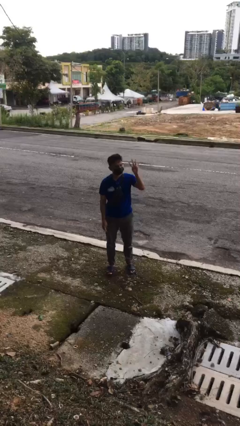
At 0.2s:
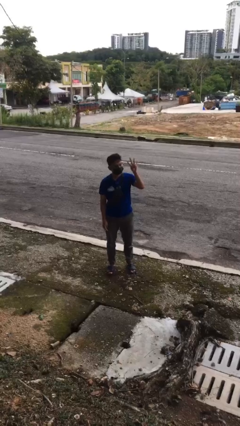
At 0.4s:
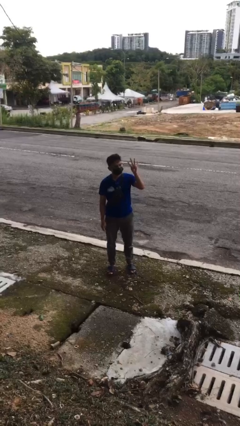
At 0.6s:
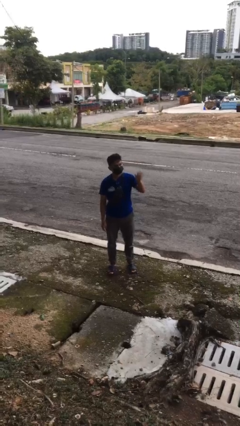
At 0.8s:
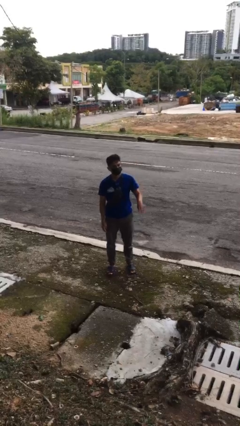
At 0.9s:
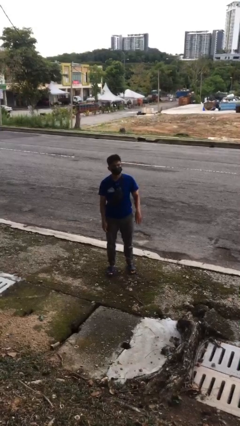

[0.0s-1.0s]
person gestures number four

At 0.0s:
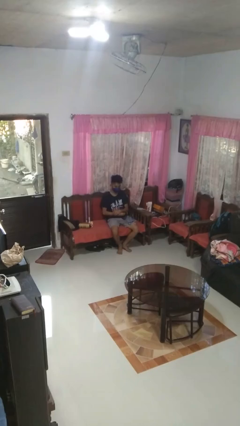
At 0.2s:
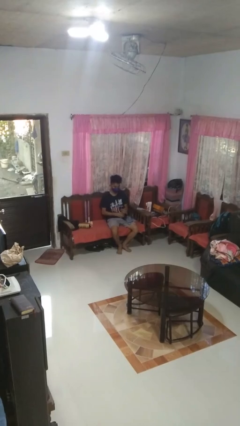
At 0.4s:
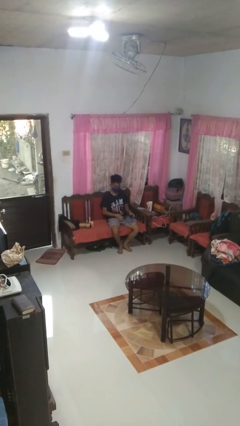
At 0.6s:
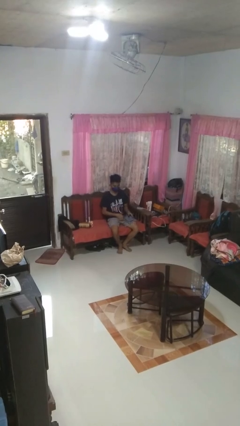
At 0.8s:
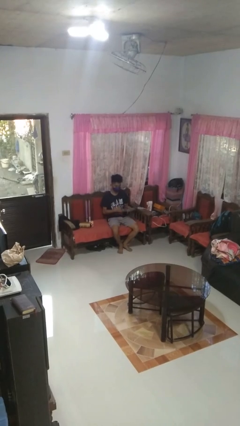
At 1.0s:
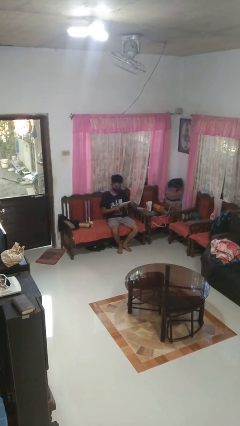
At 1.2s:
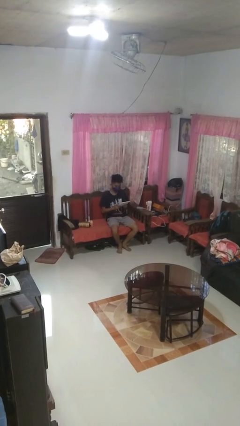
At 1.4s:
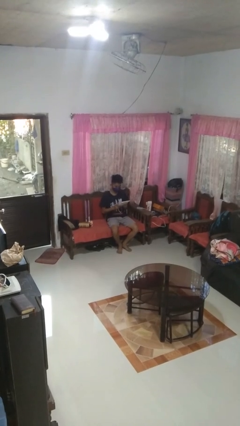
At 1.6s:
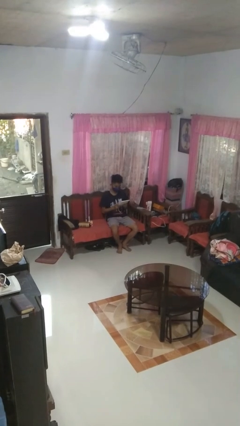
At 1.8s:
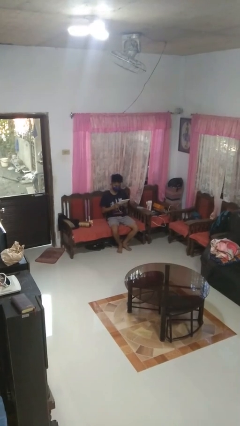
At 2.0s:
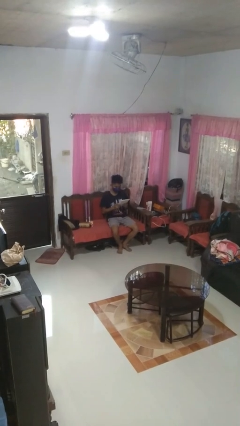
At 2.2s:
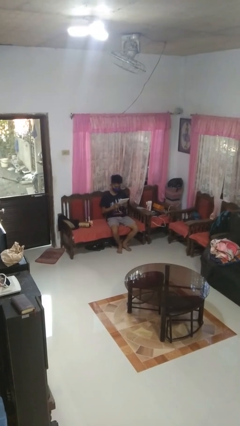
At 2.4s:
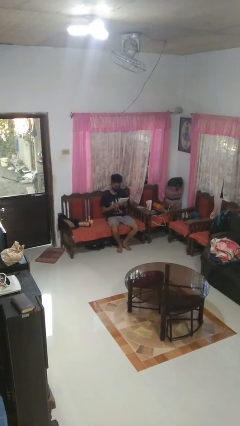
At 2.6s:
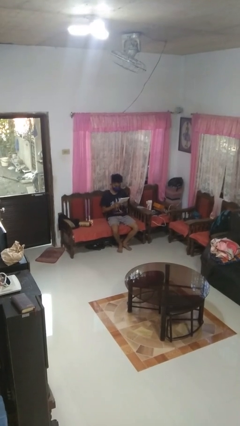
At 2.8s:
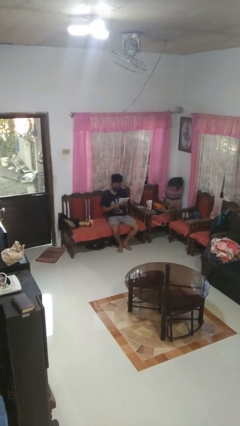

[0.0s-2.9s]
person interacts with tablet

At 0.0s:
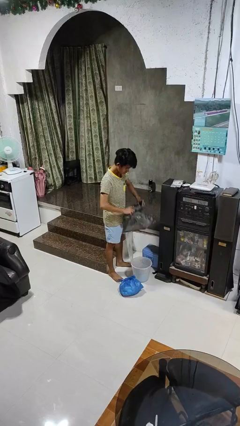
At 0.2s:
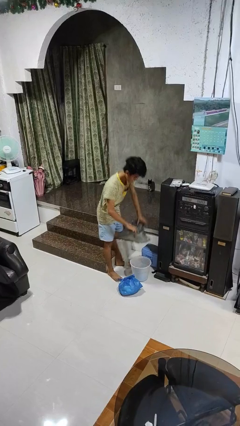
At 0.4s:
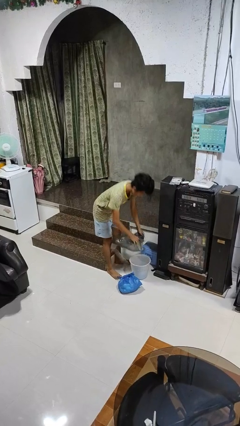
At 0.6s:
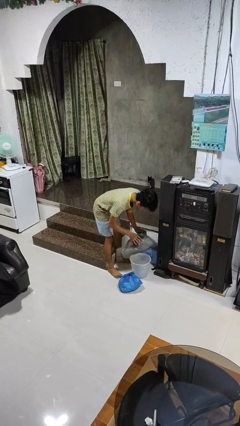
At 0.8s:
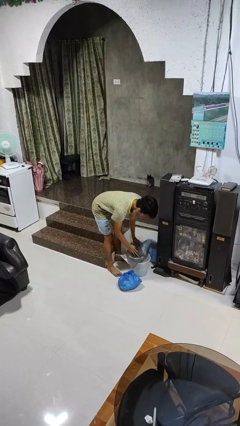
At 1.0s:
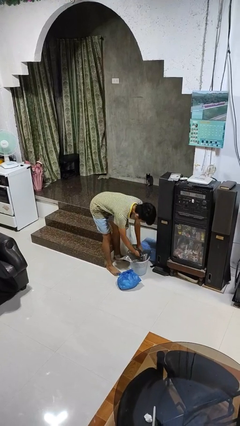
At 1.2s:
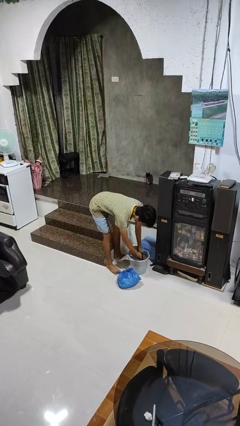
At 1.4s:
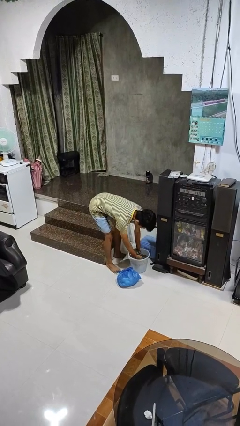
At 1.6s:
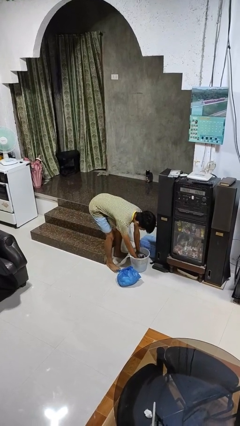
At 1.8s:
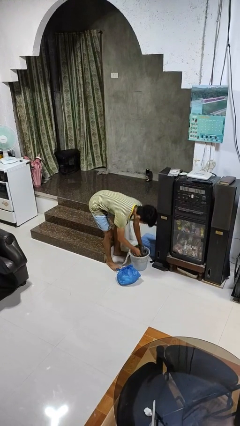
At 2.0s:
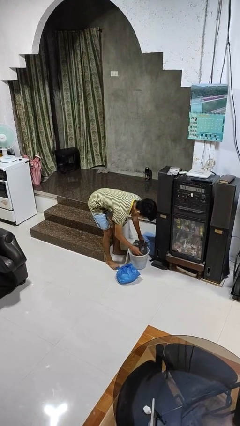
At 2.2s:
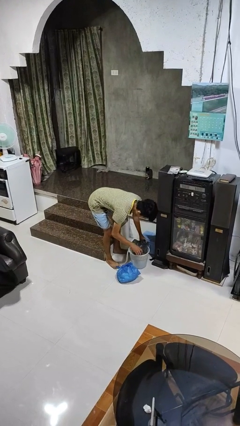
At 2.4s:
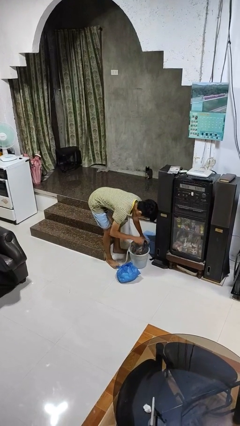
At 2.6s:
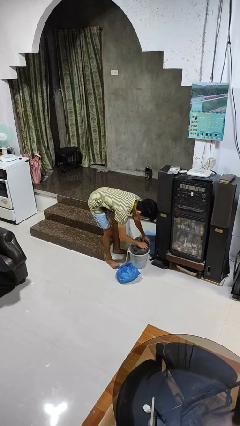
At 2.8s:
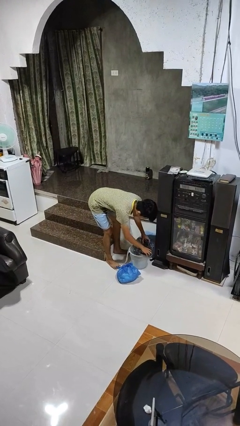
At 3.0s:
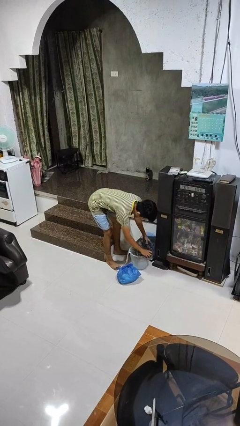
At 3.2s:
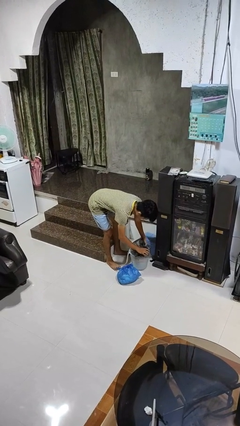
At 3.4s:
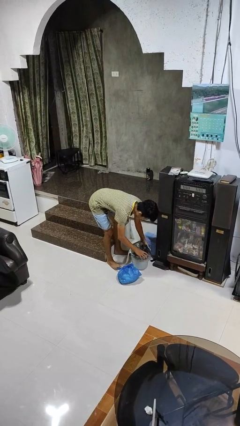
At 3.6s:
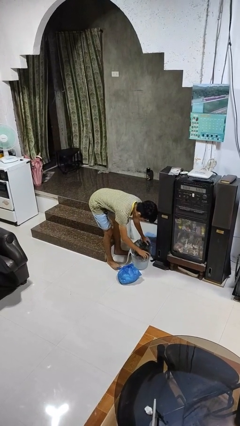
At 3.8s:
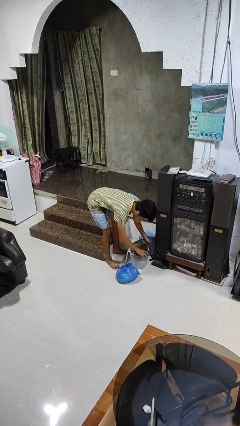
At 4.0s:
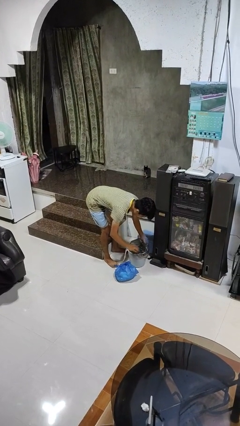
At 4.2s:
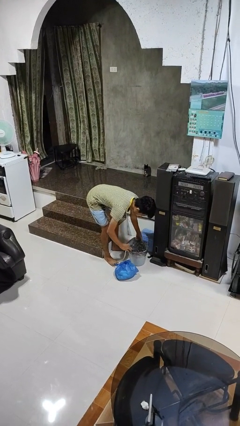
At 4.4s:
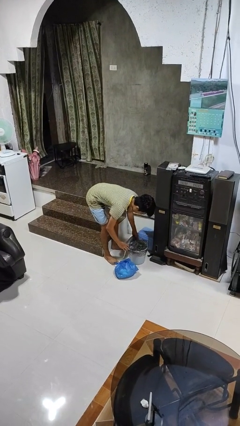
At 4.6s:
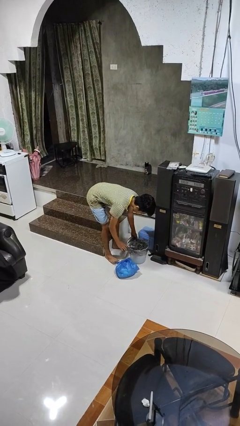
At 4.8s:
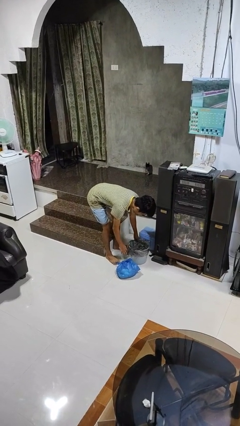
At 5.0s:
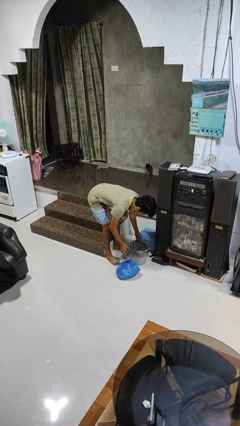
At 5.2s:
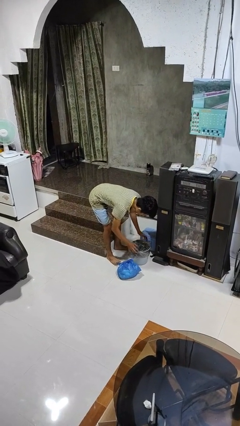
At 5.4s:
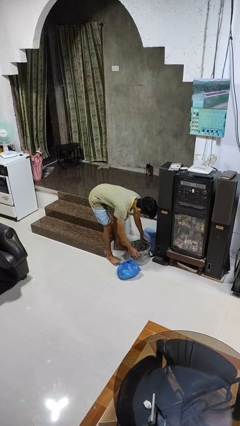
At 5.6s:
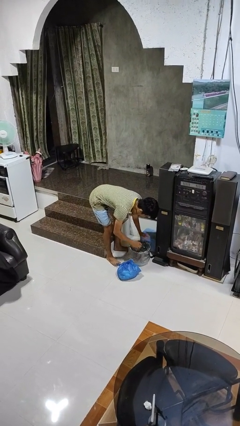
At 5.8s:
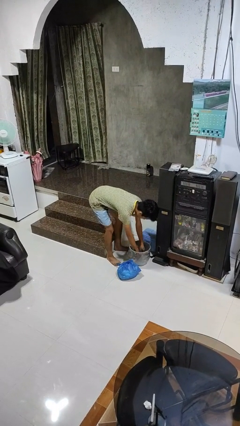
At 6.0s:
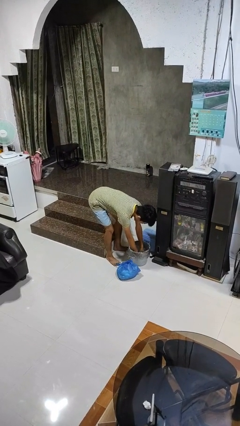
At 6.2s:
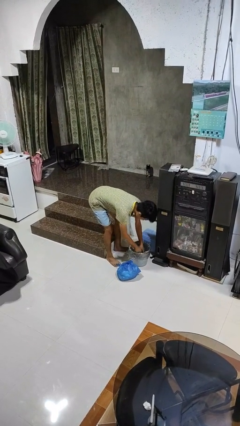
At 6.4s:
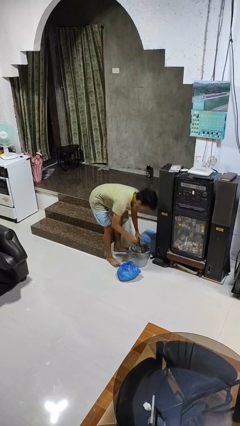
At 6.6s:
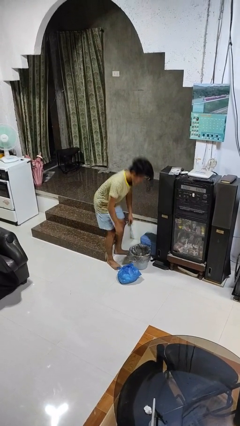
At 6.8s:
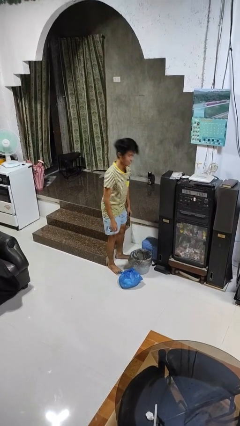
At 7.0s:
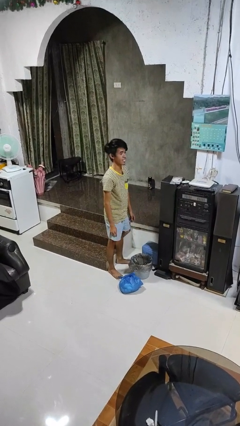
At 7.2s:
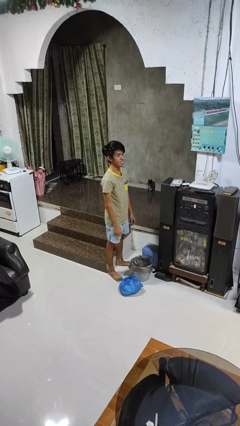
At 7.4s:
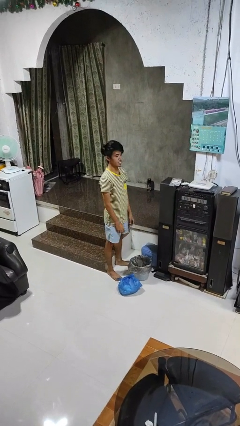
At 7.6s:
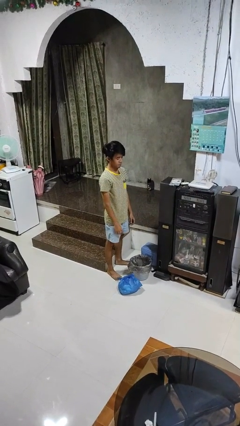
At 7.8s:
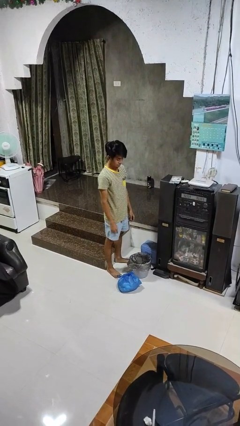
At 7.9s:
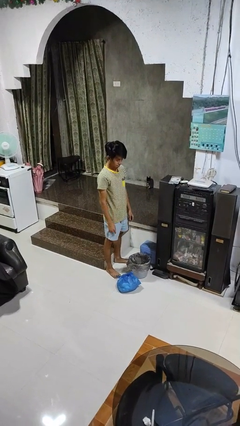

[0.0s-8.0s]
person inserts trashbag into trashcan

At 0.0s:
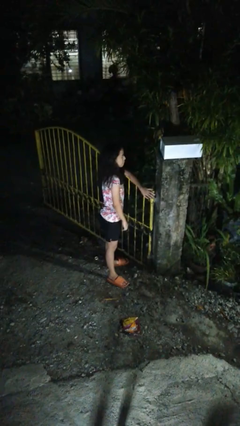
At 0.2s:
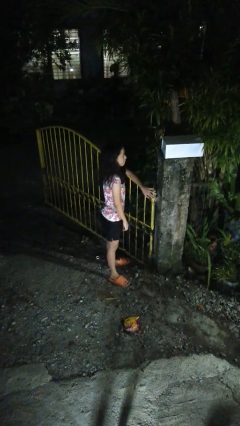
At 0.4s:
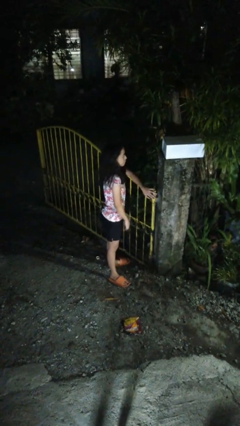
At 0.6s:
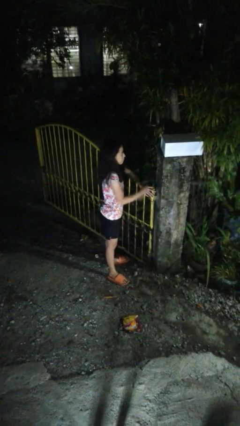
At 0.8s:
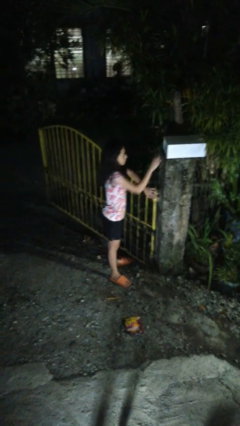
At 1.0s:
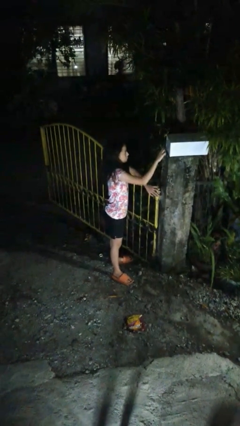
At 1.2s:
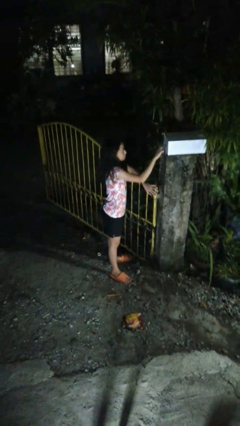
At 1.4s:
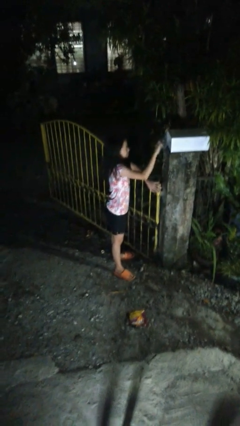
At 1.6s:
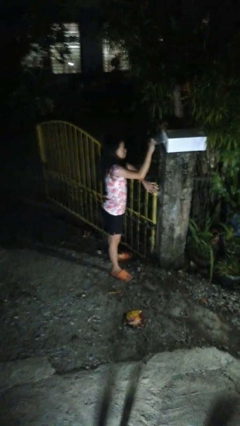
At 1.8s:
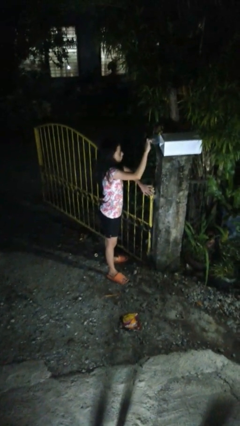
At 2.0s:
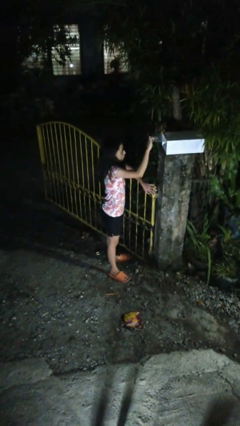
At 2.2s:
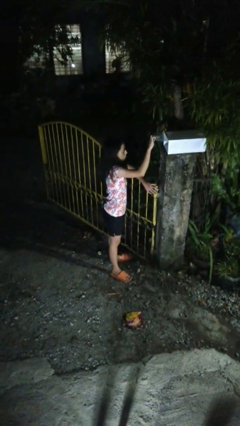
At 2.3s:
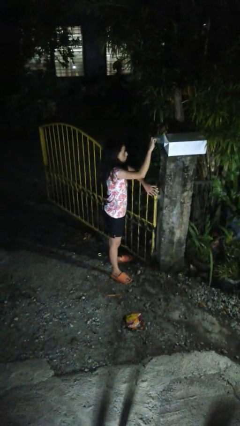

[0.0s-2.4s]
person opens mailbox

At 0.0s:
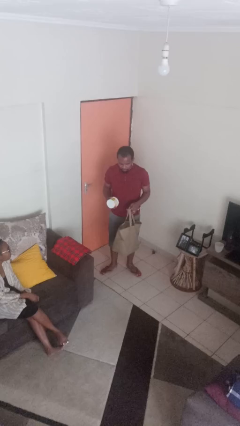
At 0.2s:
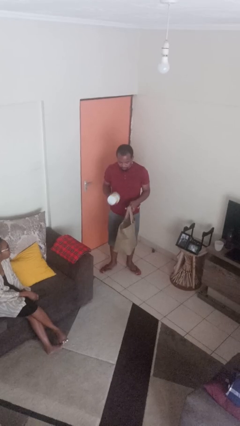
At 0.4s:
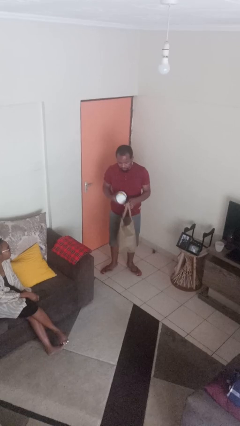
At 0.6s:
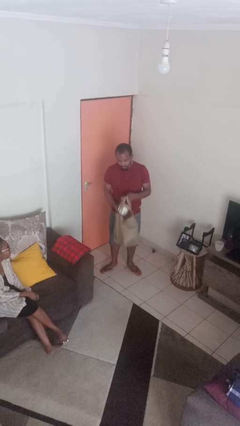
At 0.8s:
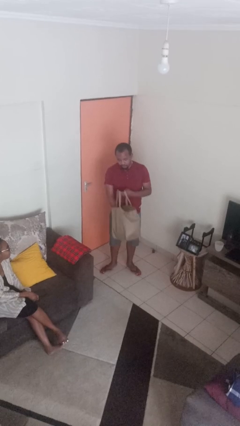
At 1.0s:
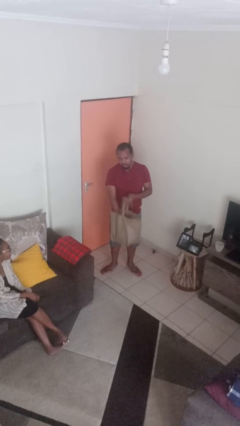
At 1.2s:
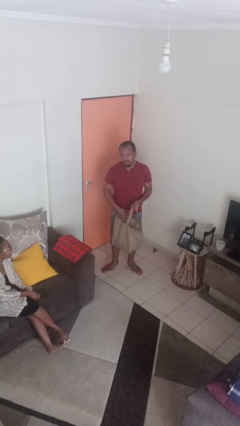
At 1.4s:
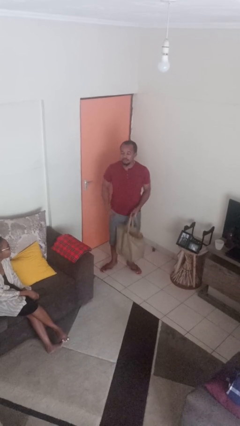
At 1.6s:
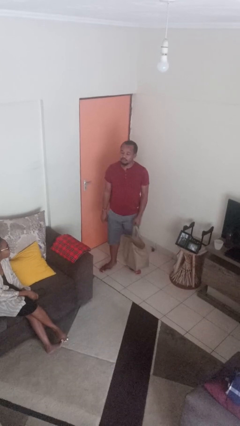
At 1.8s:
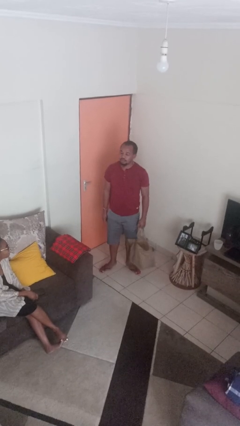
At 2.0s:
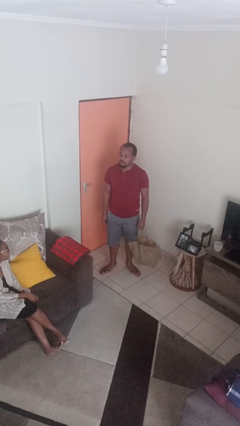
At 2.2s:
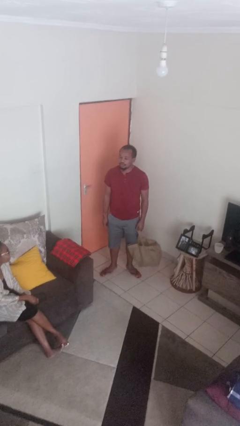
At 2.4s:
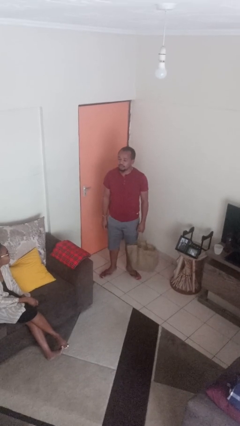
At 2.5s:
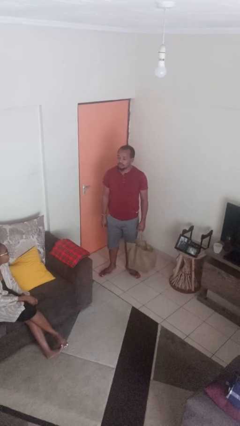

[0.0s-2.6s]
person puts object into bag

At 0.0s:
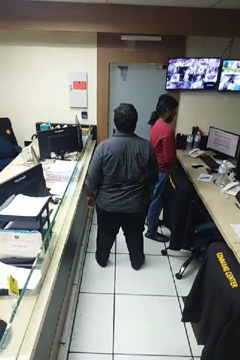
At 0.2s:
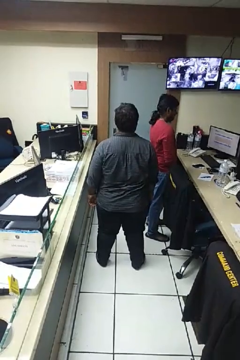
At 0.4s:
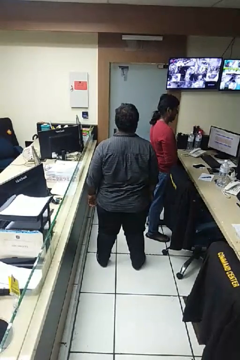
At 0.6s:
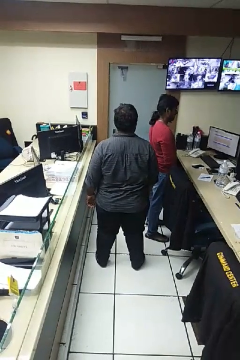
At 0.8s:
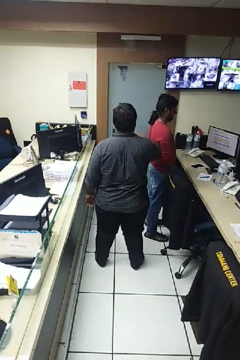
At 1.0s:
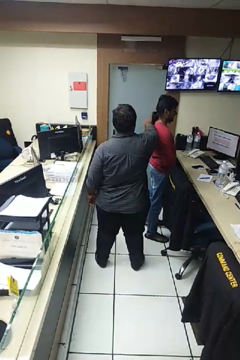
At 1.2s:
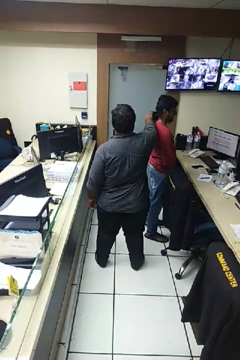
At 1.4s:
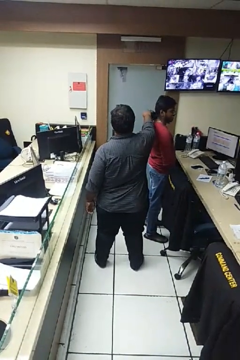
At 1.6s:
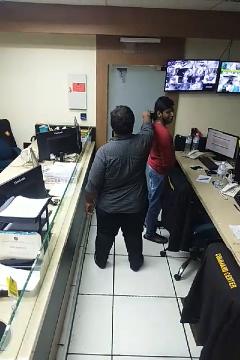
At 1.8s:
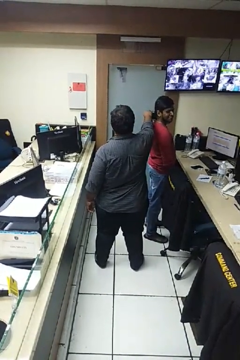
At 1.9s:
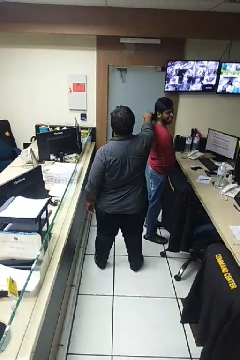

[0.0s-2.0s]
person grabs person by hair
